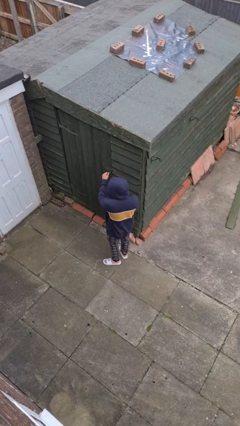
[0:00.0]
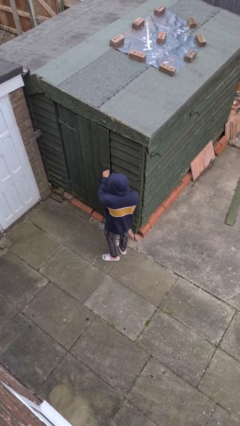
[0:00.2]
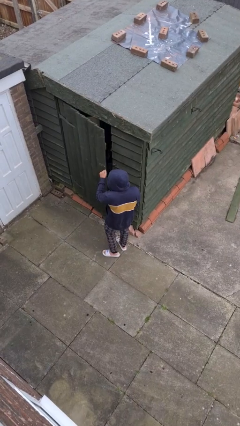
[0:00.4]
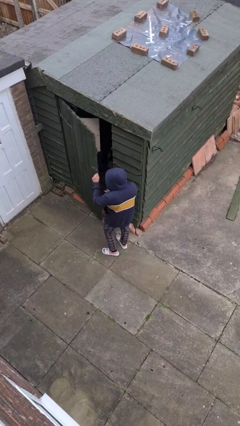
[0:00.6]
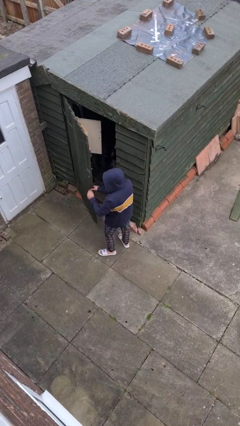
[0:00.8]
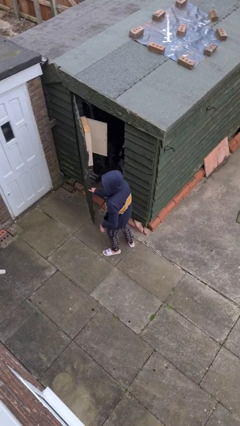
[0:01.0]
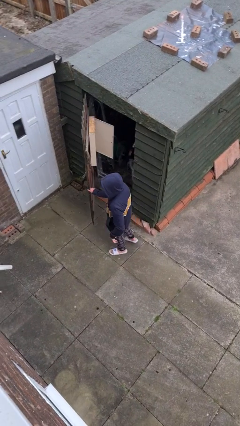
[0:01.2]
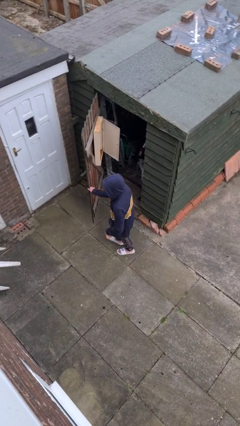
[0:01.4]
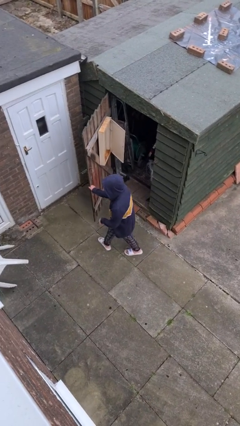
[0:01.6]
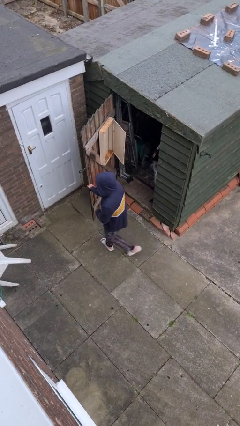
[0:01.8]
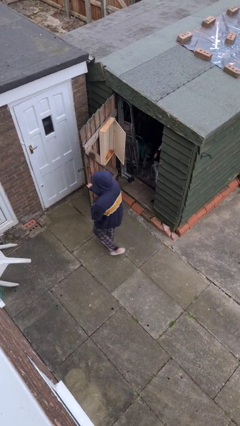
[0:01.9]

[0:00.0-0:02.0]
person opens facility door

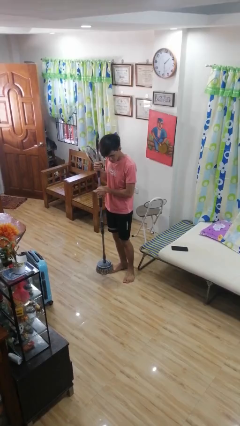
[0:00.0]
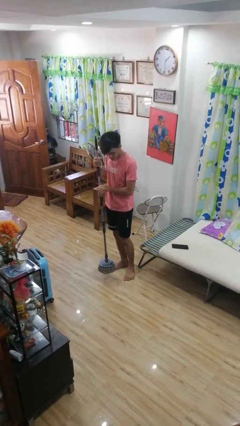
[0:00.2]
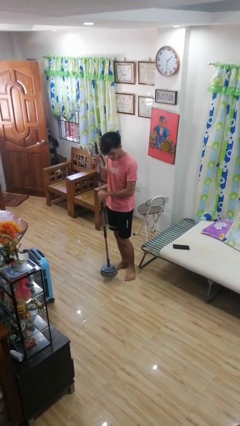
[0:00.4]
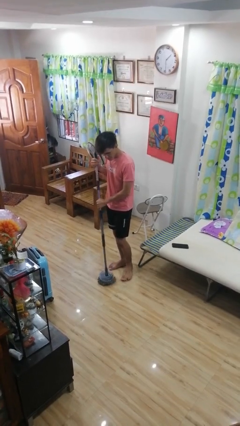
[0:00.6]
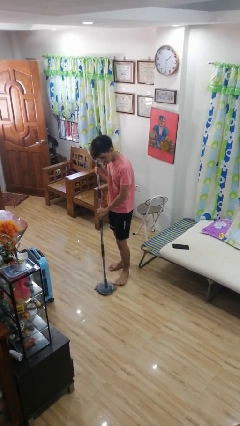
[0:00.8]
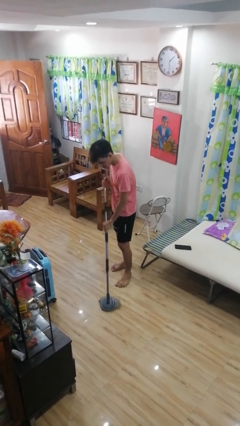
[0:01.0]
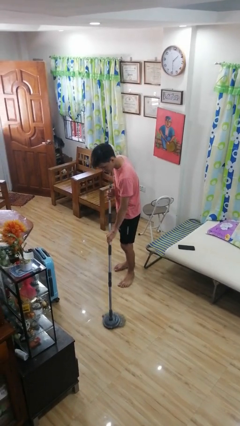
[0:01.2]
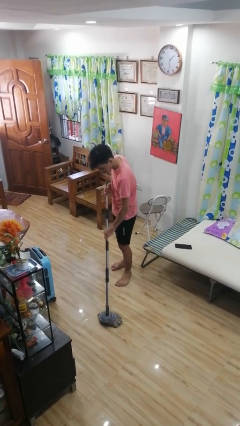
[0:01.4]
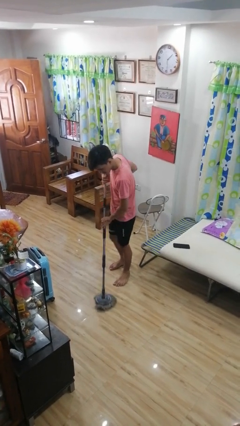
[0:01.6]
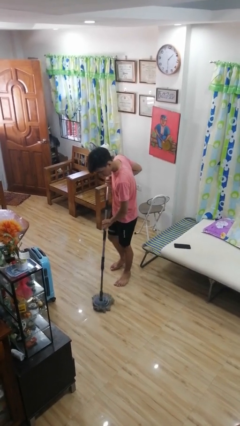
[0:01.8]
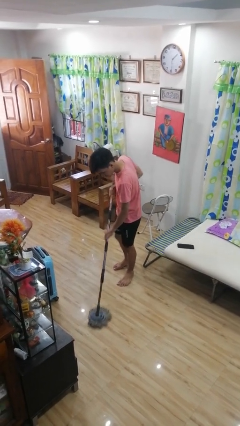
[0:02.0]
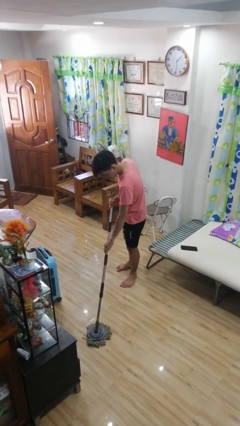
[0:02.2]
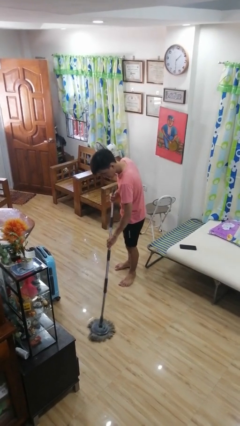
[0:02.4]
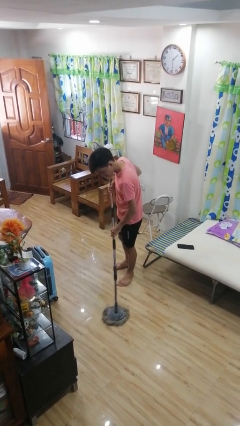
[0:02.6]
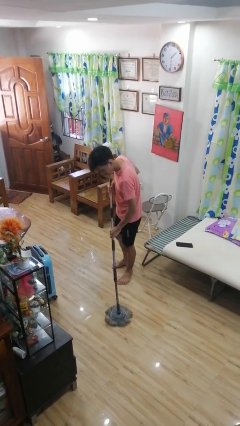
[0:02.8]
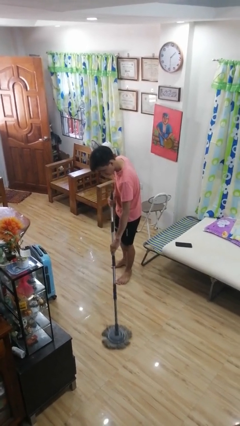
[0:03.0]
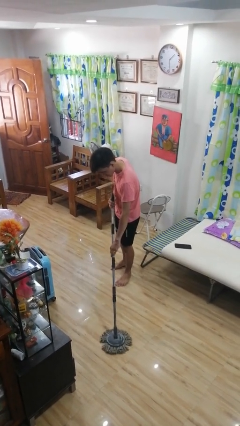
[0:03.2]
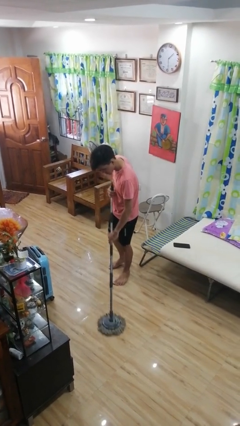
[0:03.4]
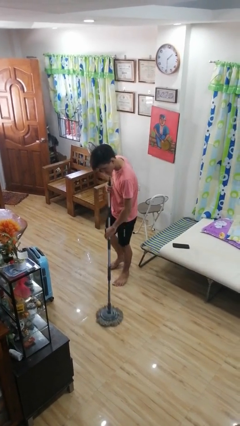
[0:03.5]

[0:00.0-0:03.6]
person mops

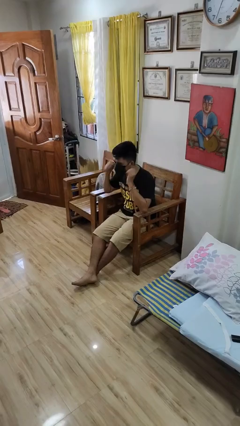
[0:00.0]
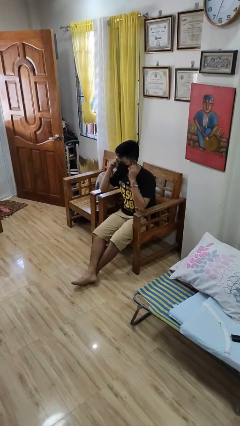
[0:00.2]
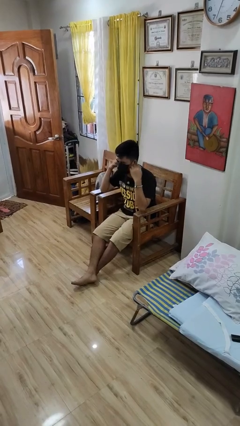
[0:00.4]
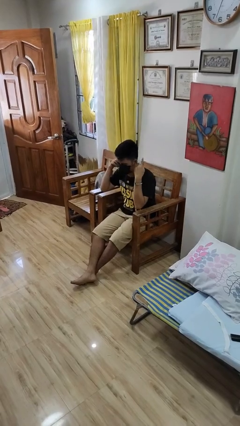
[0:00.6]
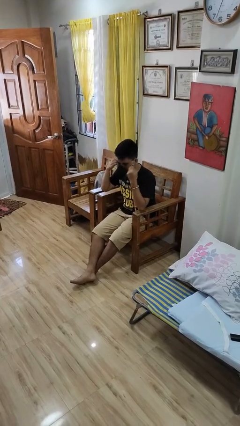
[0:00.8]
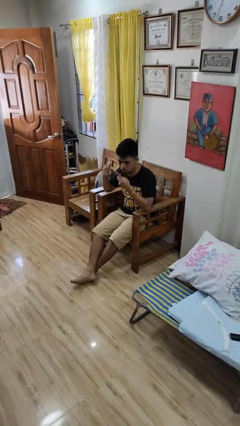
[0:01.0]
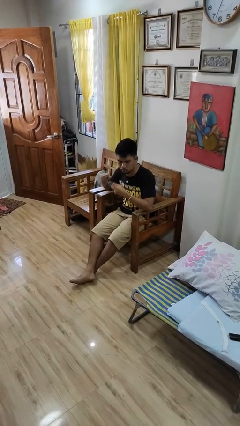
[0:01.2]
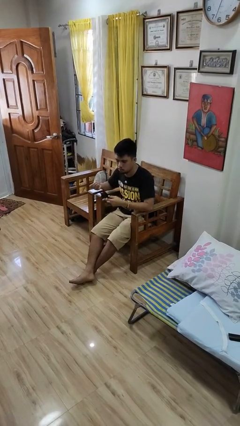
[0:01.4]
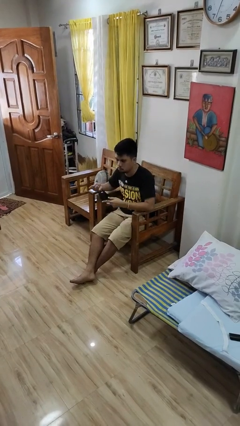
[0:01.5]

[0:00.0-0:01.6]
person takes off facemask

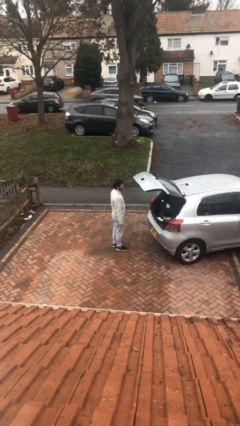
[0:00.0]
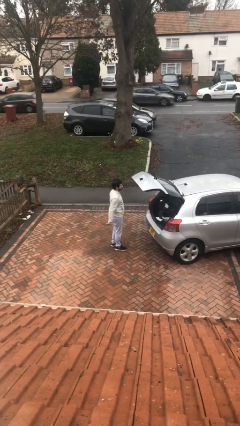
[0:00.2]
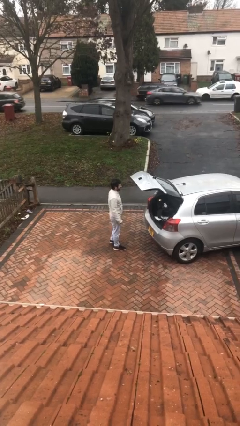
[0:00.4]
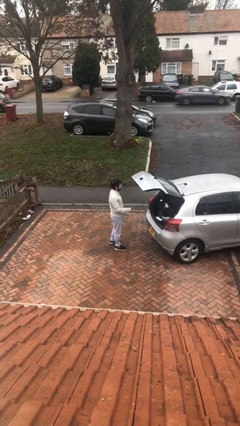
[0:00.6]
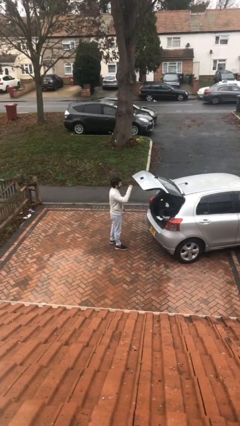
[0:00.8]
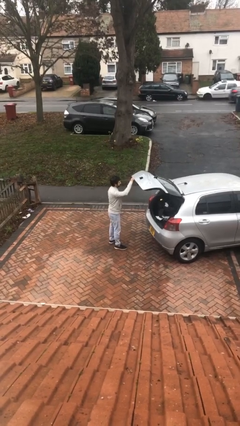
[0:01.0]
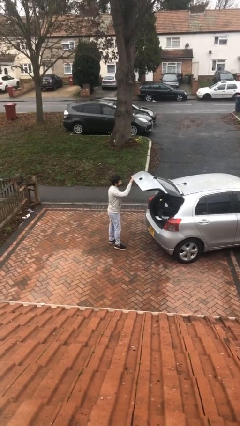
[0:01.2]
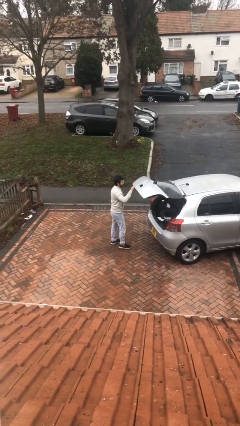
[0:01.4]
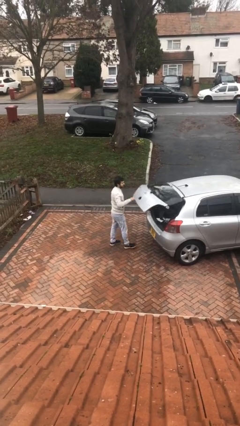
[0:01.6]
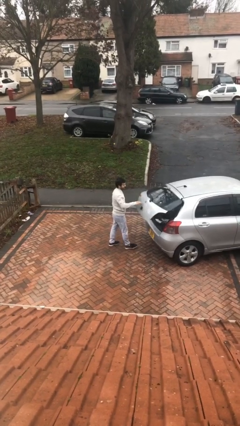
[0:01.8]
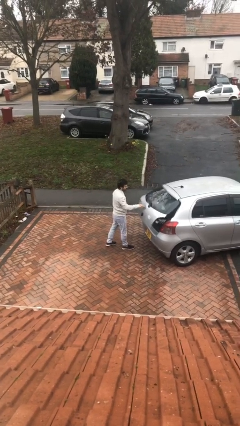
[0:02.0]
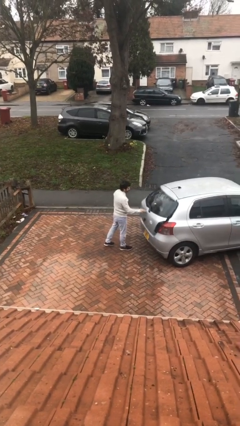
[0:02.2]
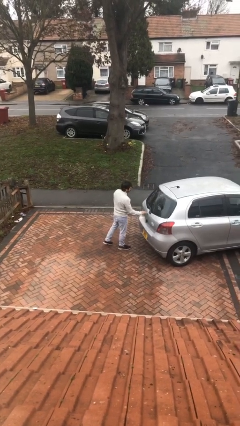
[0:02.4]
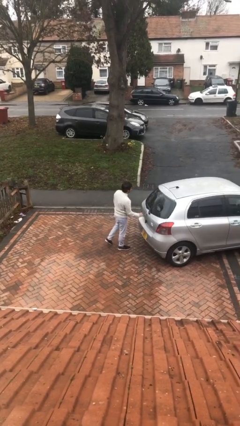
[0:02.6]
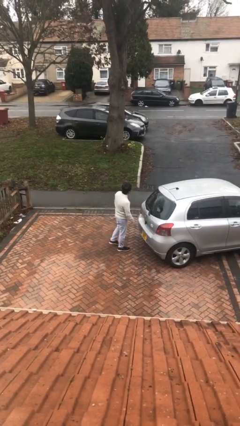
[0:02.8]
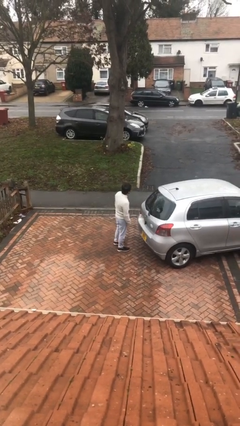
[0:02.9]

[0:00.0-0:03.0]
person closes car trunk

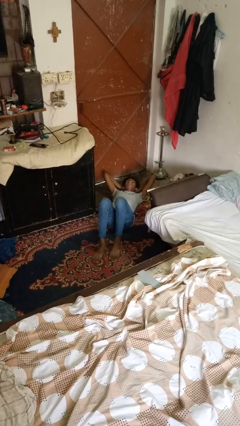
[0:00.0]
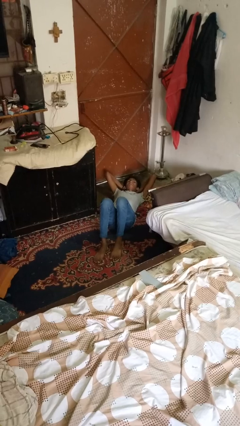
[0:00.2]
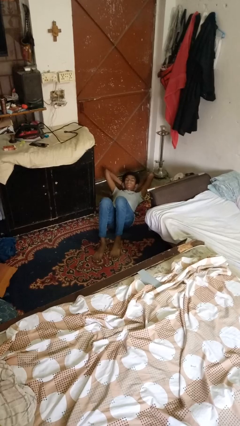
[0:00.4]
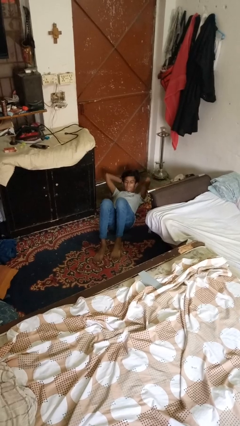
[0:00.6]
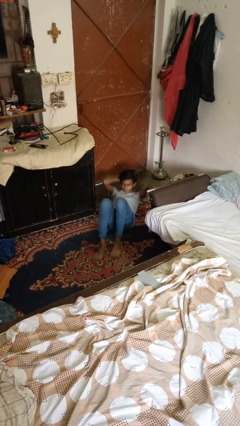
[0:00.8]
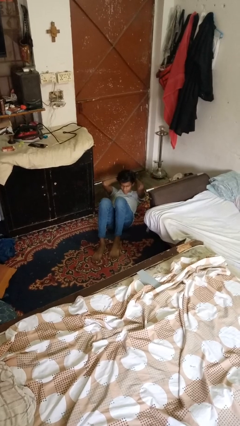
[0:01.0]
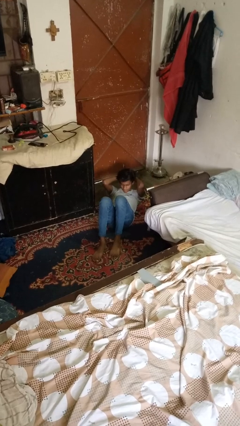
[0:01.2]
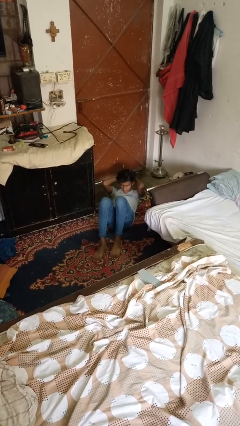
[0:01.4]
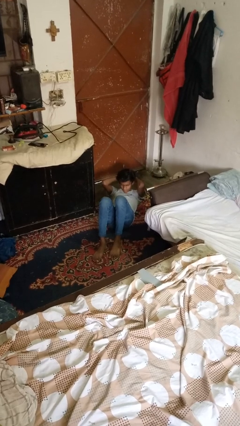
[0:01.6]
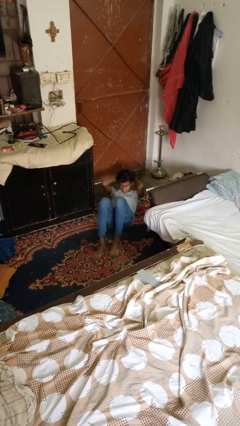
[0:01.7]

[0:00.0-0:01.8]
person exercises with situp

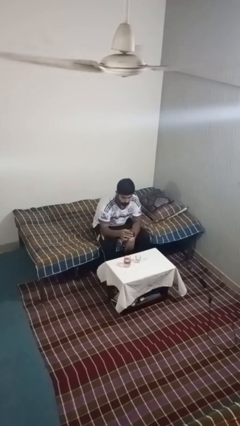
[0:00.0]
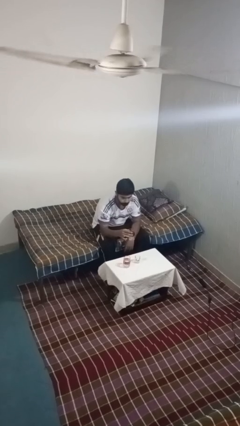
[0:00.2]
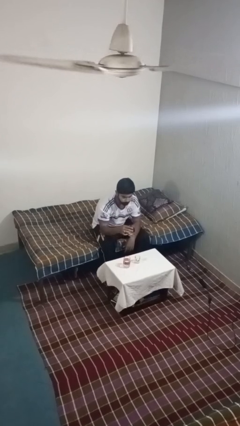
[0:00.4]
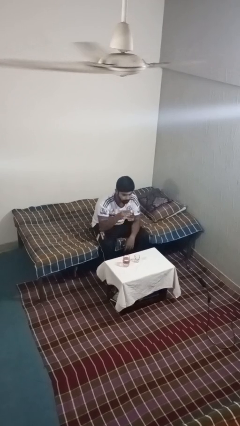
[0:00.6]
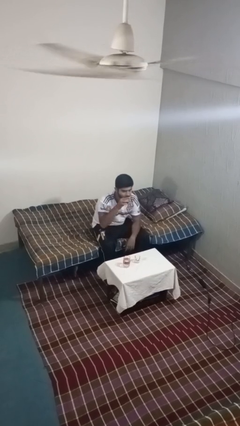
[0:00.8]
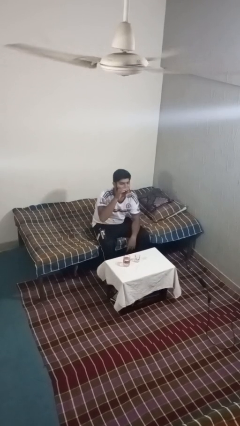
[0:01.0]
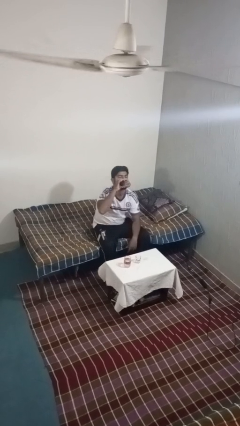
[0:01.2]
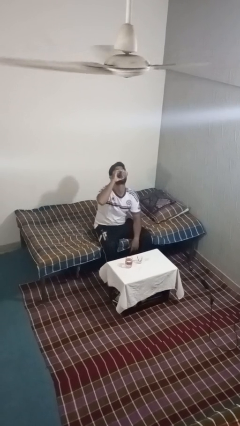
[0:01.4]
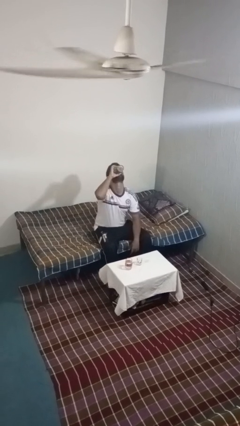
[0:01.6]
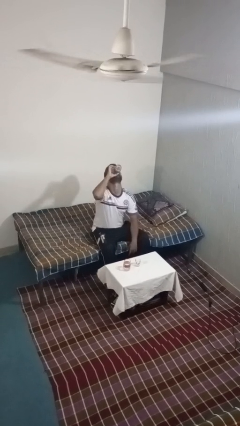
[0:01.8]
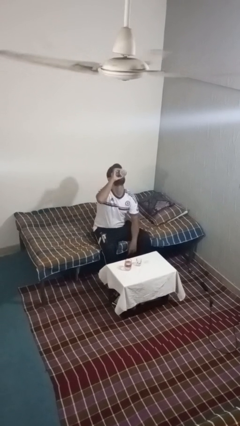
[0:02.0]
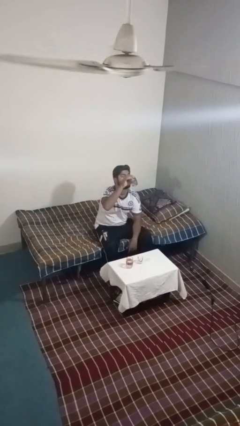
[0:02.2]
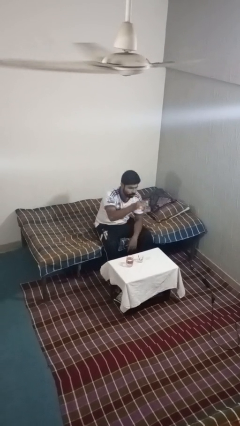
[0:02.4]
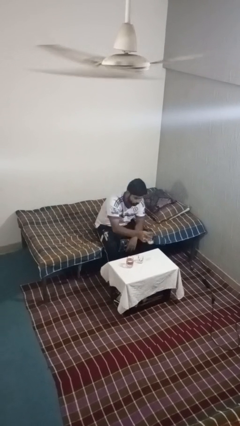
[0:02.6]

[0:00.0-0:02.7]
person drinks from shotglass

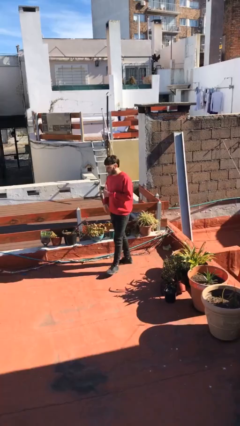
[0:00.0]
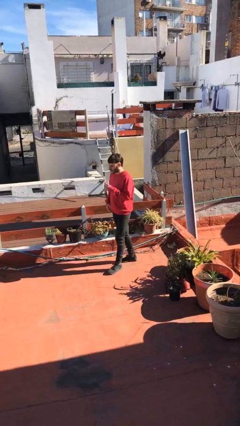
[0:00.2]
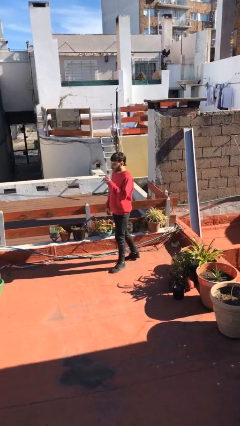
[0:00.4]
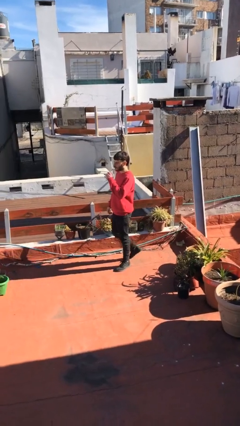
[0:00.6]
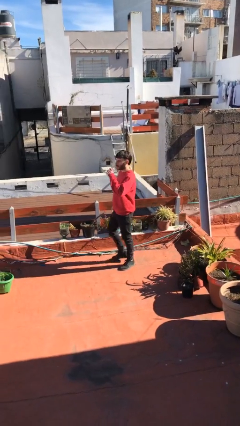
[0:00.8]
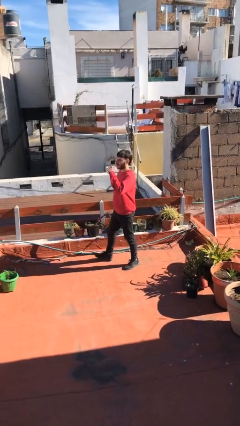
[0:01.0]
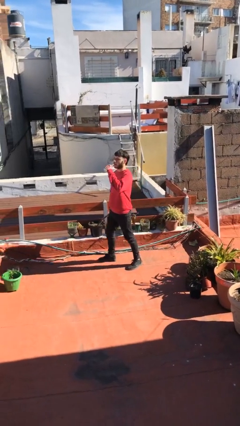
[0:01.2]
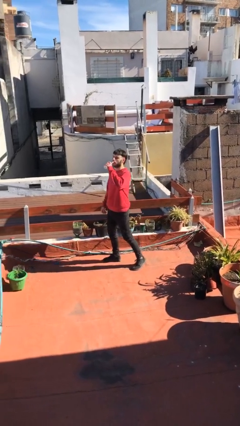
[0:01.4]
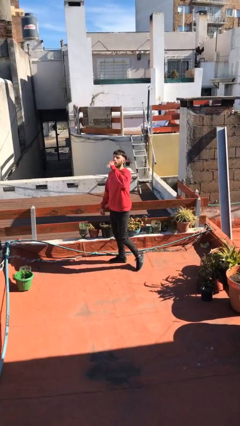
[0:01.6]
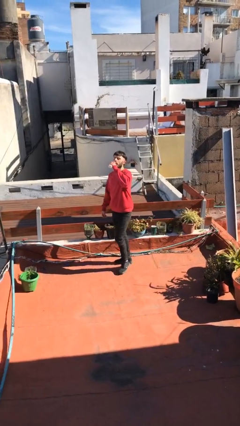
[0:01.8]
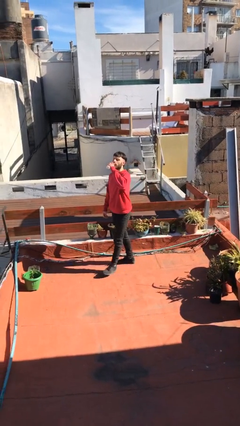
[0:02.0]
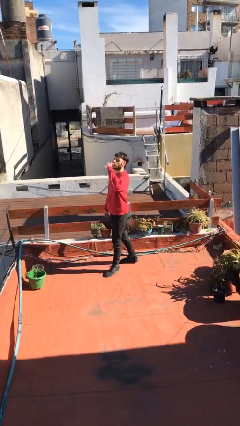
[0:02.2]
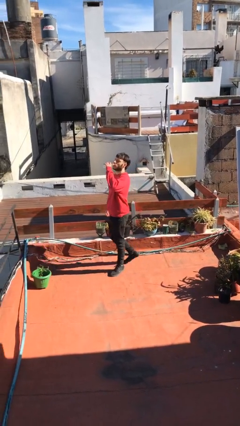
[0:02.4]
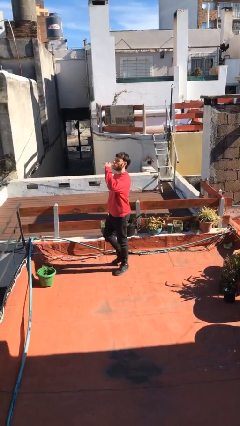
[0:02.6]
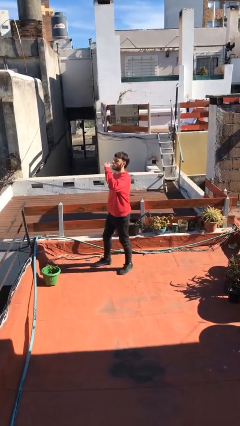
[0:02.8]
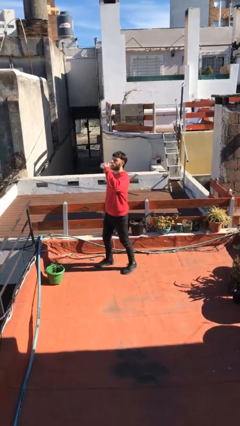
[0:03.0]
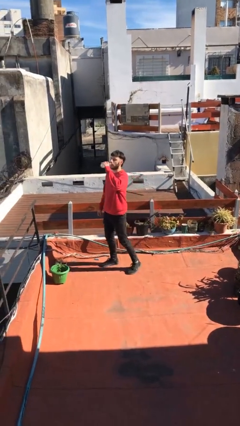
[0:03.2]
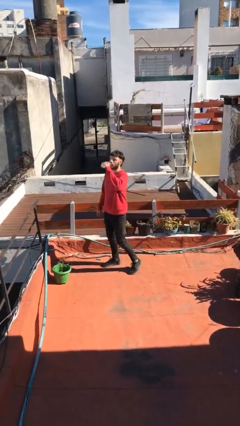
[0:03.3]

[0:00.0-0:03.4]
person drinks from bottle
